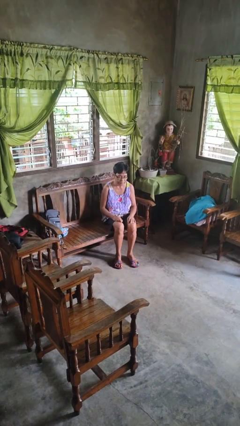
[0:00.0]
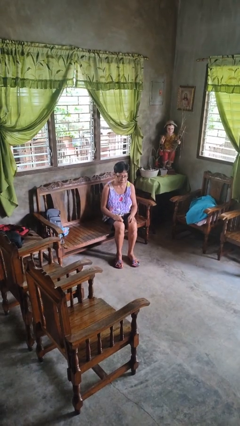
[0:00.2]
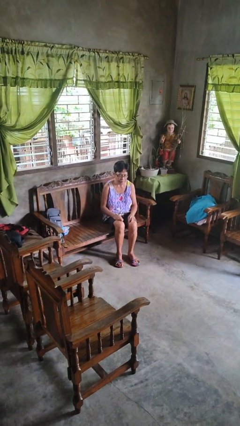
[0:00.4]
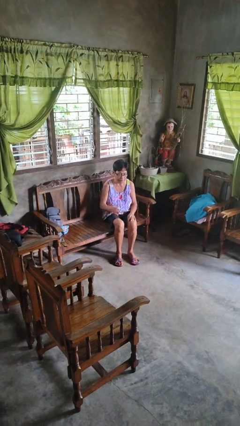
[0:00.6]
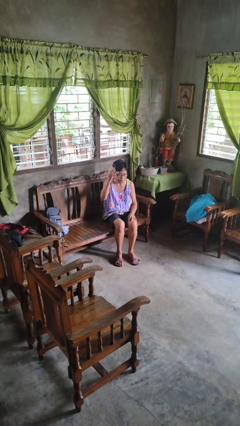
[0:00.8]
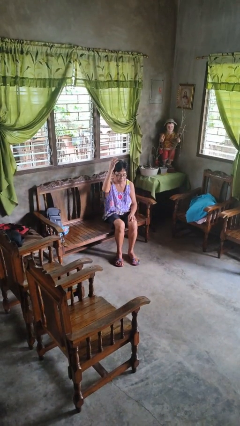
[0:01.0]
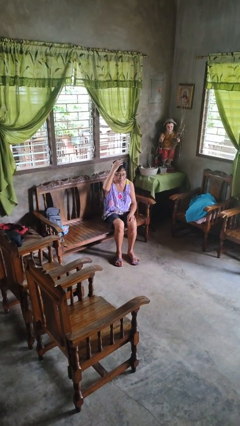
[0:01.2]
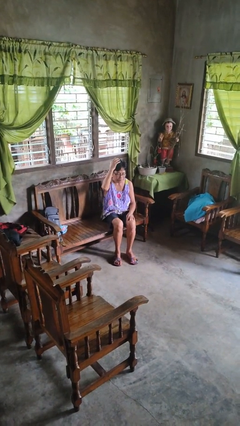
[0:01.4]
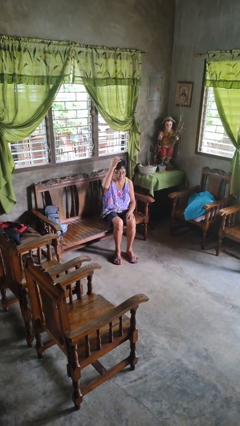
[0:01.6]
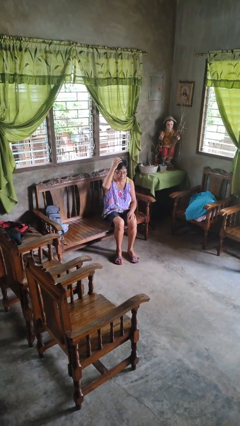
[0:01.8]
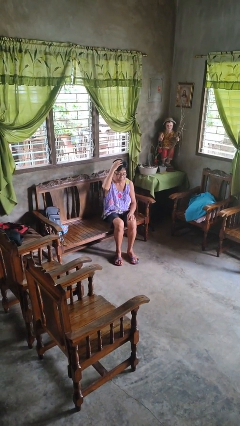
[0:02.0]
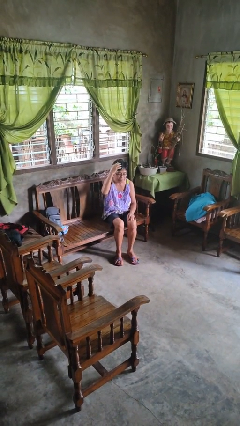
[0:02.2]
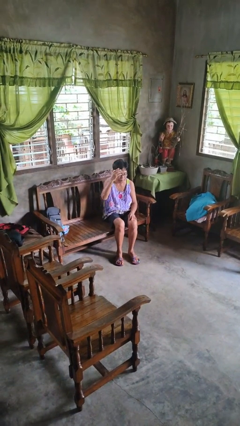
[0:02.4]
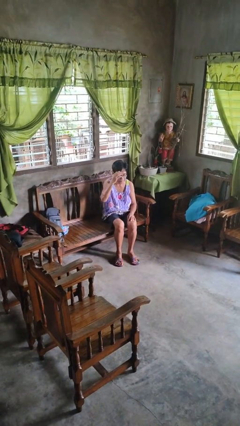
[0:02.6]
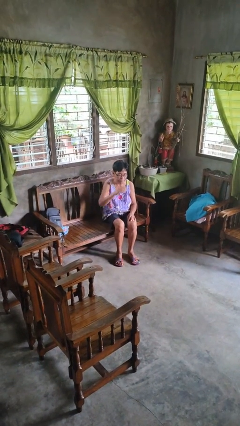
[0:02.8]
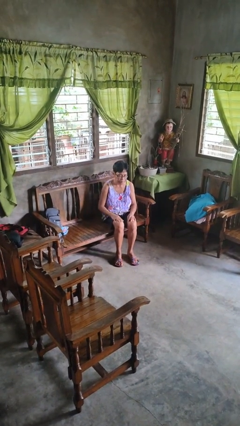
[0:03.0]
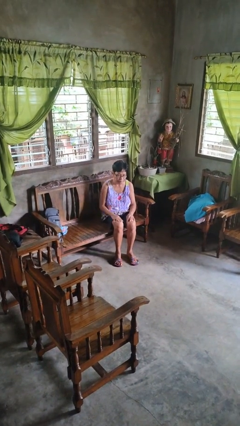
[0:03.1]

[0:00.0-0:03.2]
person pats head

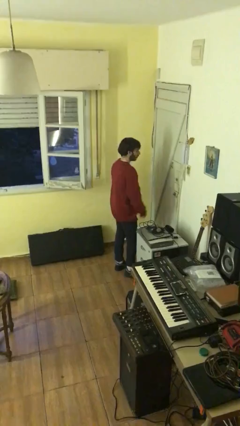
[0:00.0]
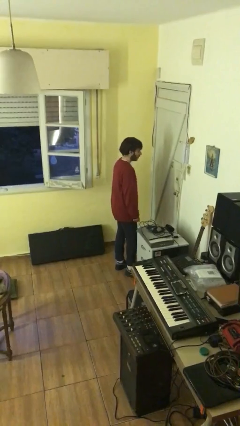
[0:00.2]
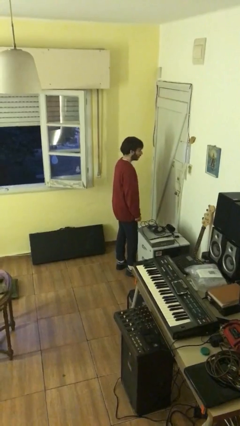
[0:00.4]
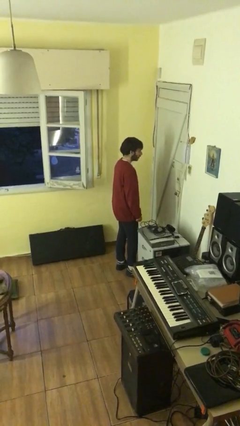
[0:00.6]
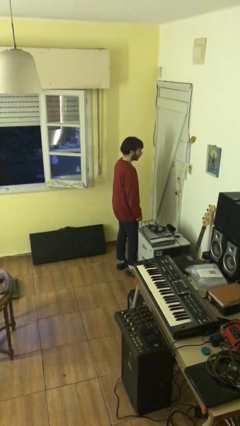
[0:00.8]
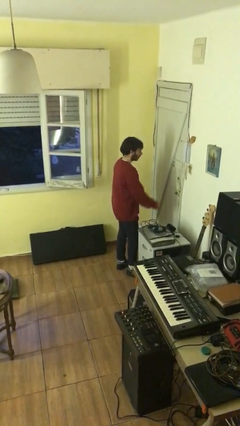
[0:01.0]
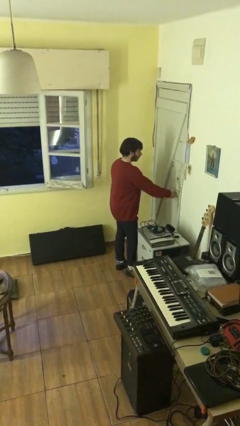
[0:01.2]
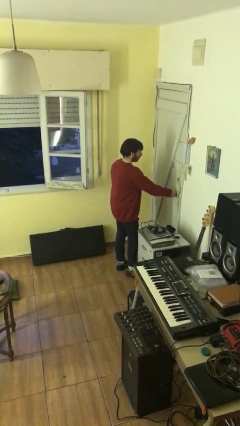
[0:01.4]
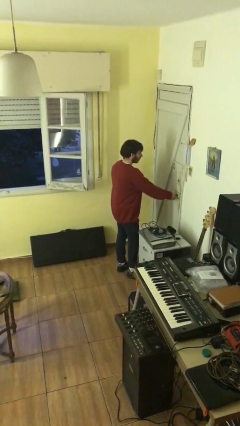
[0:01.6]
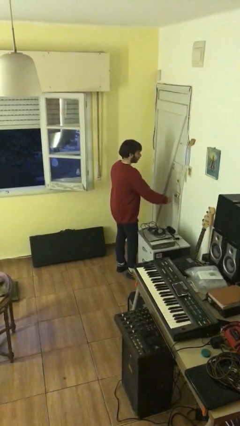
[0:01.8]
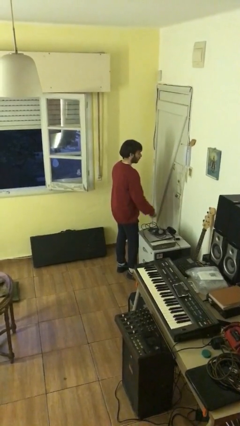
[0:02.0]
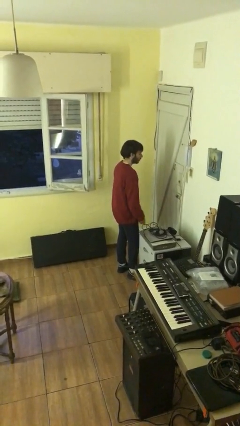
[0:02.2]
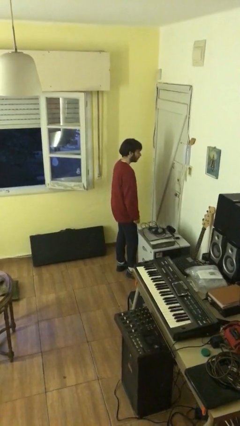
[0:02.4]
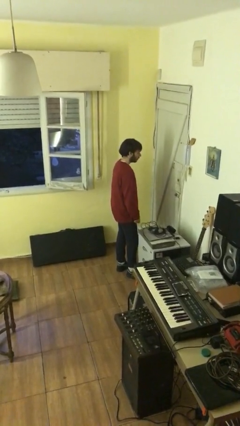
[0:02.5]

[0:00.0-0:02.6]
person locks door with keys

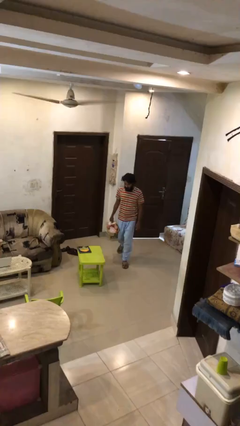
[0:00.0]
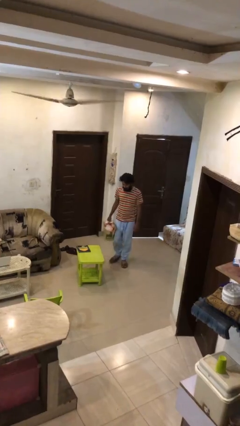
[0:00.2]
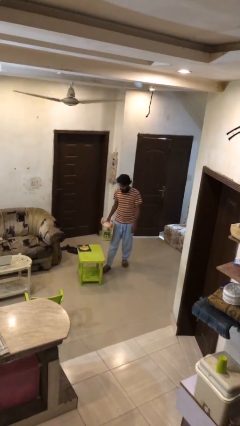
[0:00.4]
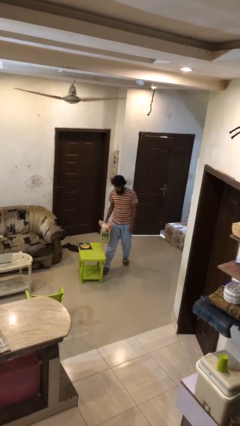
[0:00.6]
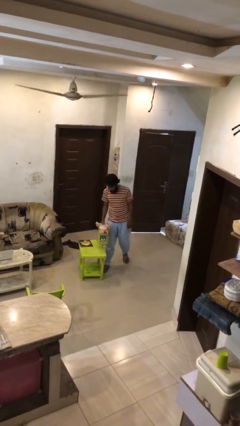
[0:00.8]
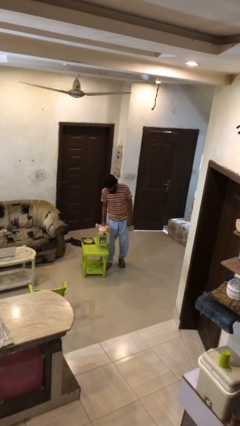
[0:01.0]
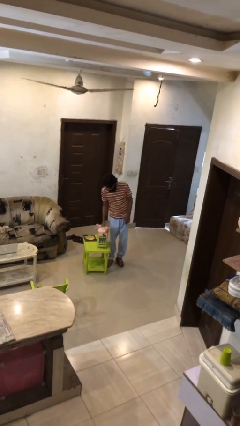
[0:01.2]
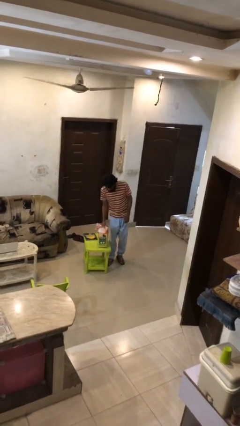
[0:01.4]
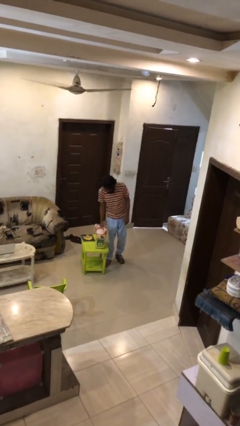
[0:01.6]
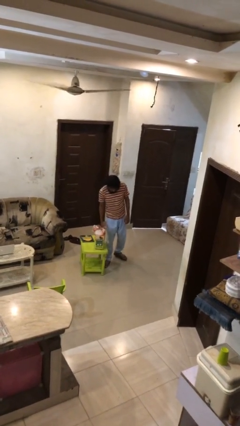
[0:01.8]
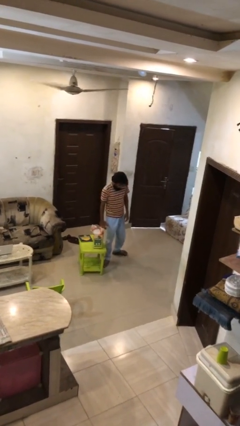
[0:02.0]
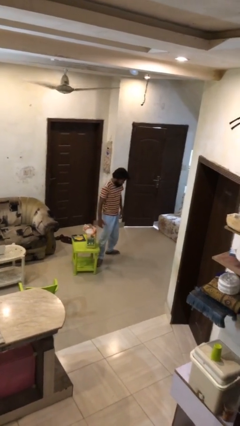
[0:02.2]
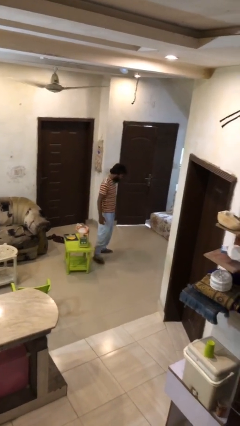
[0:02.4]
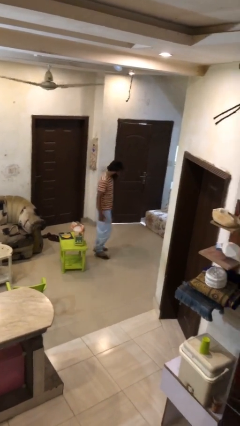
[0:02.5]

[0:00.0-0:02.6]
person puts down object on table

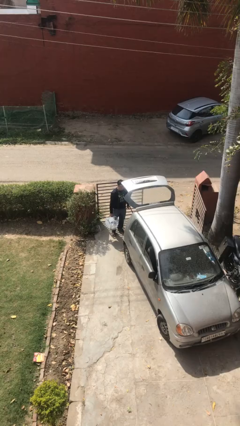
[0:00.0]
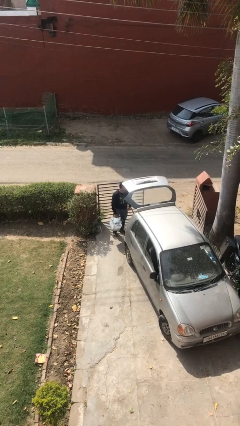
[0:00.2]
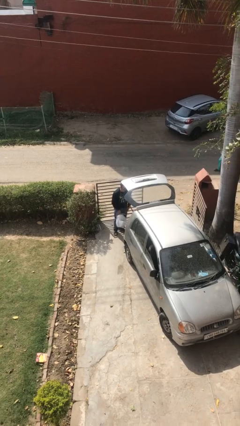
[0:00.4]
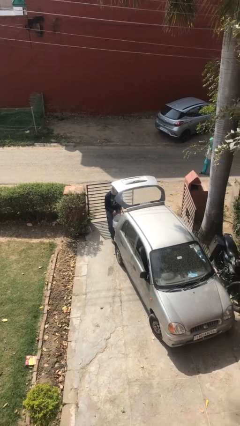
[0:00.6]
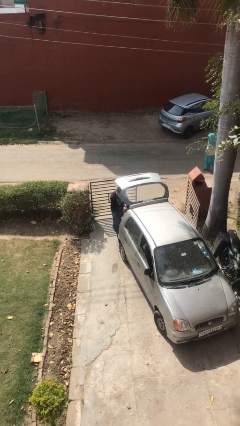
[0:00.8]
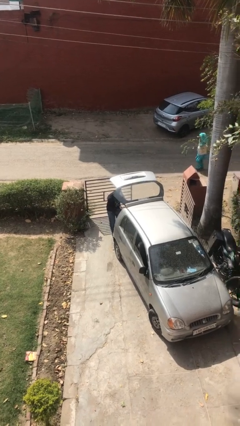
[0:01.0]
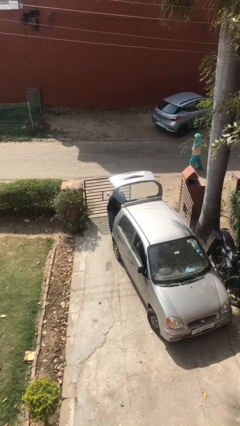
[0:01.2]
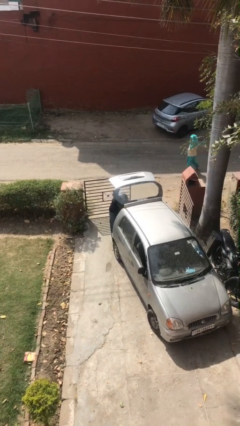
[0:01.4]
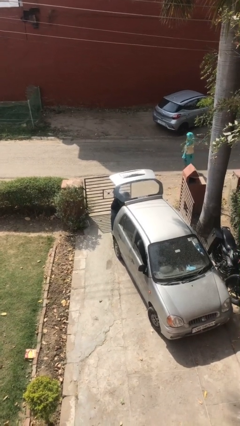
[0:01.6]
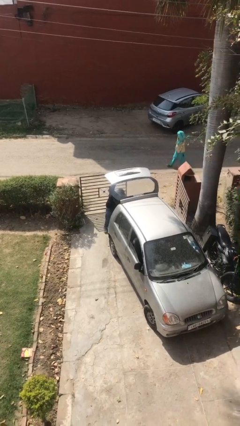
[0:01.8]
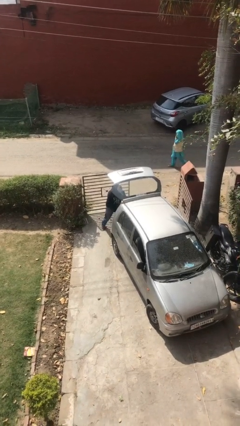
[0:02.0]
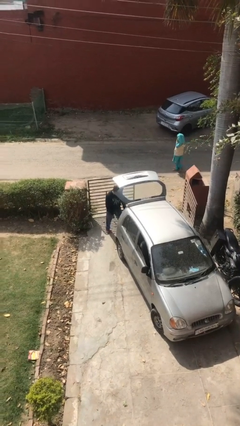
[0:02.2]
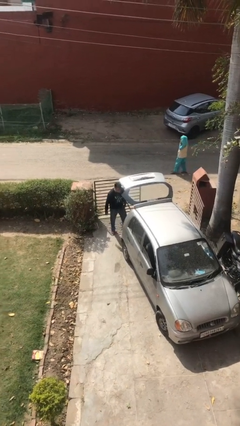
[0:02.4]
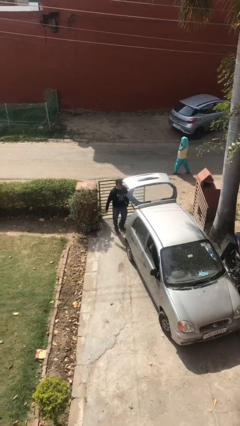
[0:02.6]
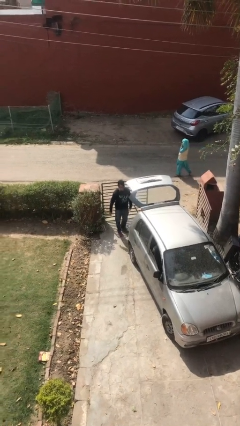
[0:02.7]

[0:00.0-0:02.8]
person loads car

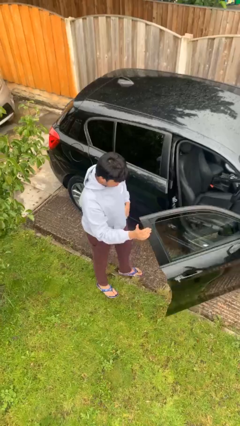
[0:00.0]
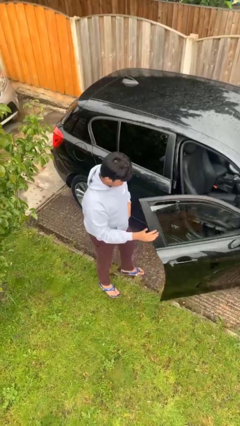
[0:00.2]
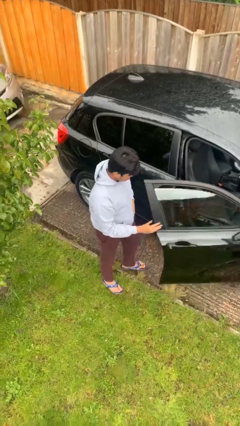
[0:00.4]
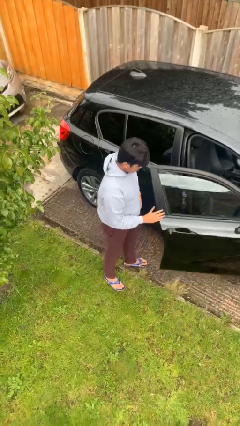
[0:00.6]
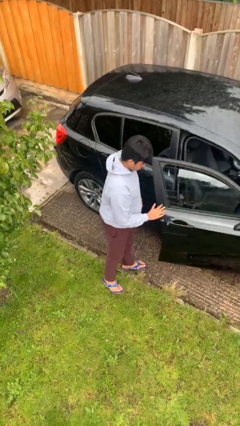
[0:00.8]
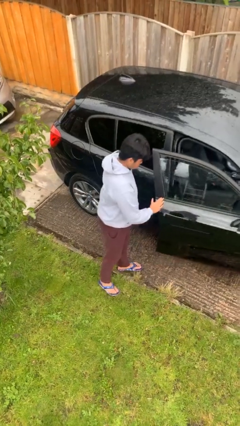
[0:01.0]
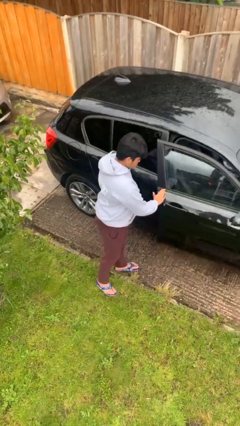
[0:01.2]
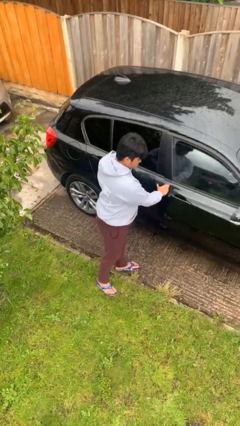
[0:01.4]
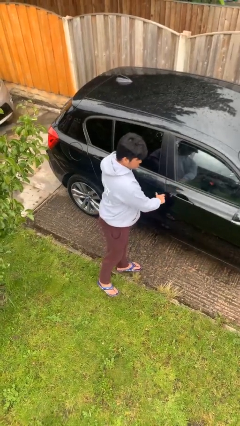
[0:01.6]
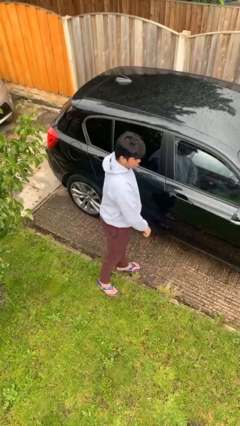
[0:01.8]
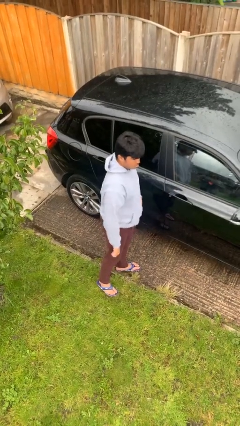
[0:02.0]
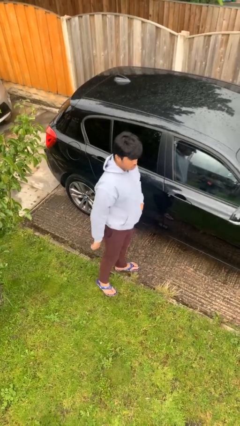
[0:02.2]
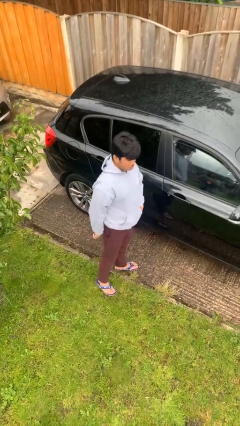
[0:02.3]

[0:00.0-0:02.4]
person closes car door

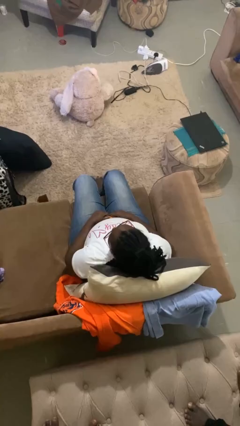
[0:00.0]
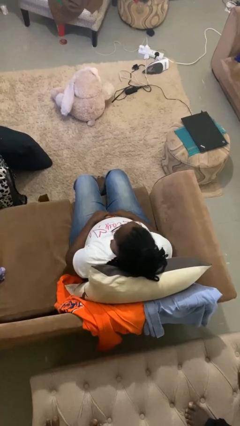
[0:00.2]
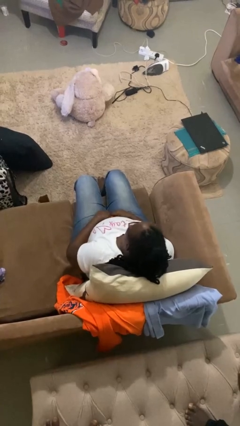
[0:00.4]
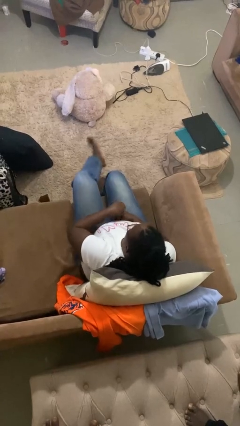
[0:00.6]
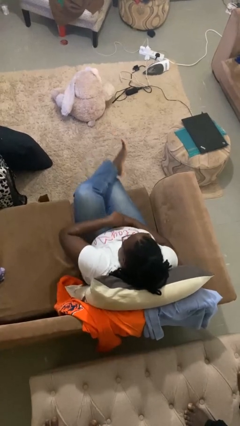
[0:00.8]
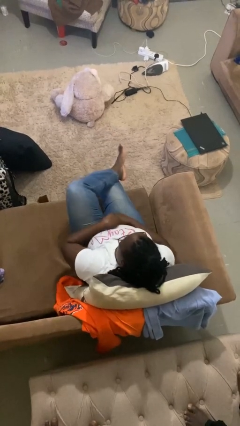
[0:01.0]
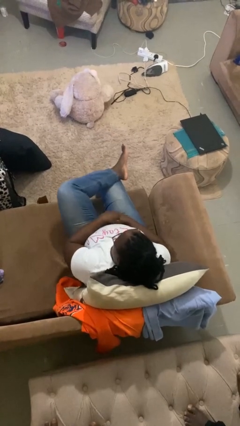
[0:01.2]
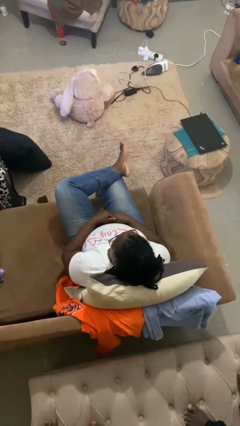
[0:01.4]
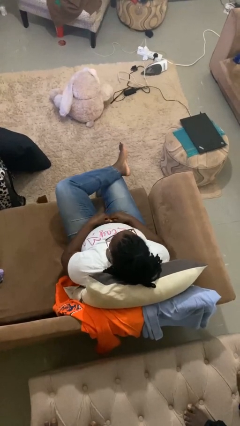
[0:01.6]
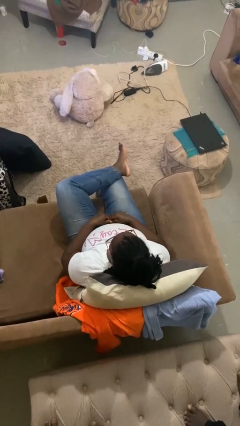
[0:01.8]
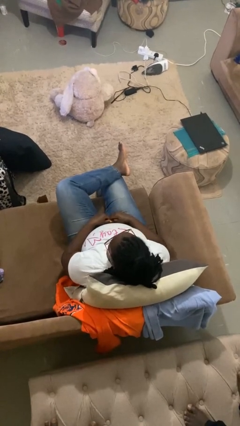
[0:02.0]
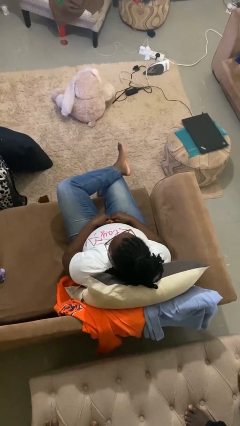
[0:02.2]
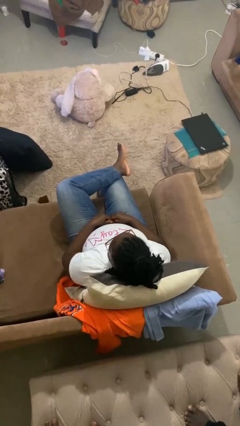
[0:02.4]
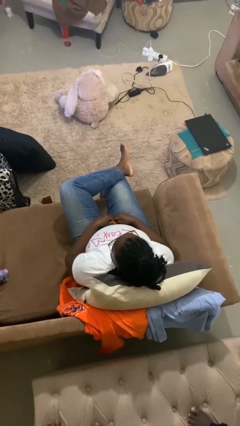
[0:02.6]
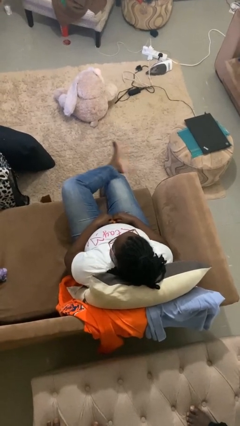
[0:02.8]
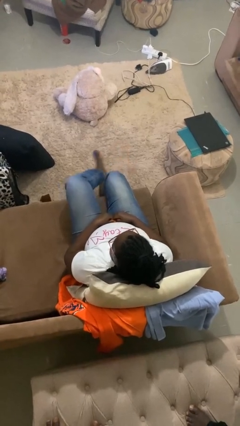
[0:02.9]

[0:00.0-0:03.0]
person crosses legs

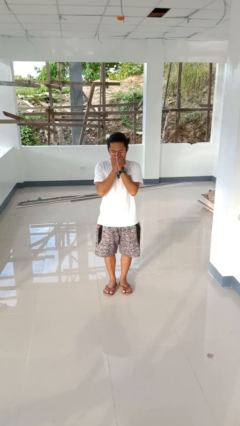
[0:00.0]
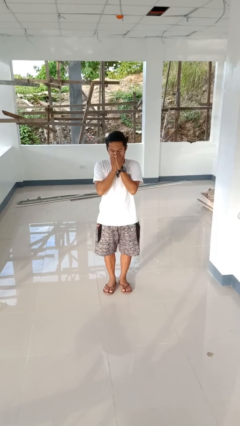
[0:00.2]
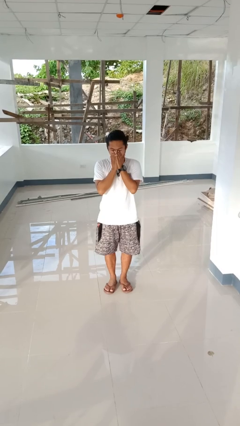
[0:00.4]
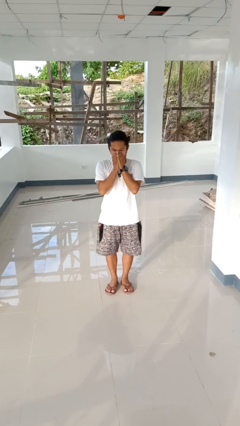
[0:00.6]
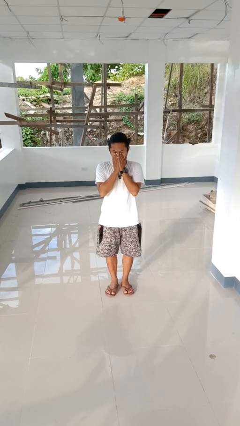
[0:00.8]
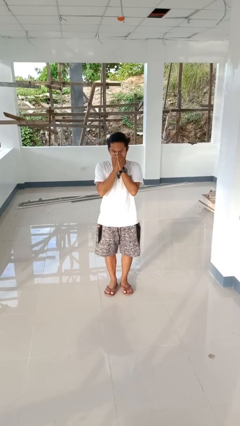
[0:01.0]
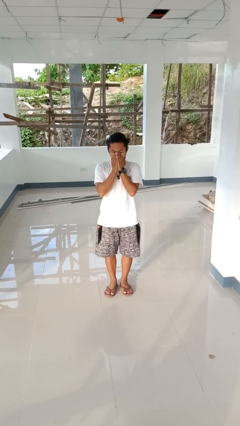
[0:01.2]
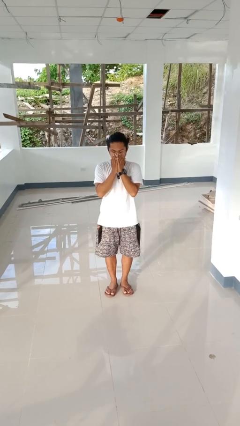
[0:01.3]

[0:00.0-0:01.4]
person sneezes into hand
